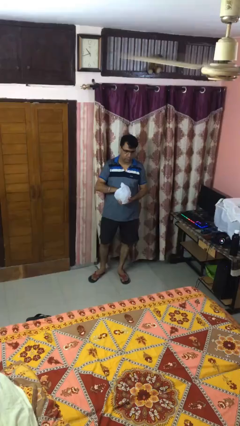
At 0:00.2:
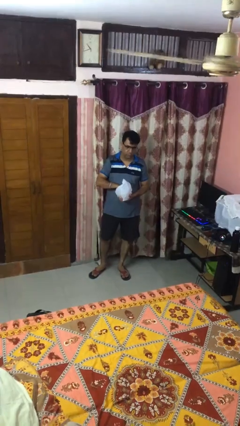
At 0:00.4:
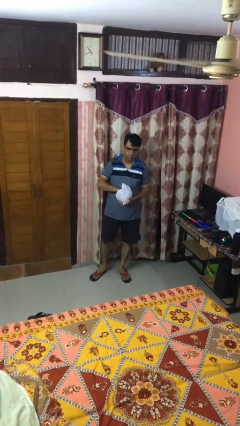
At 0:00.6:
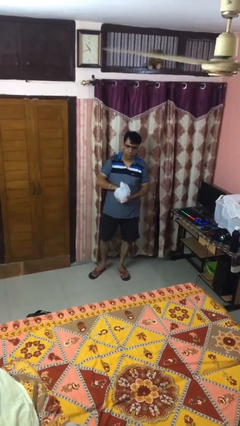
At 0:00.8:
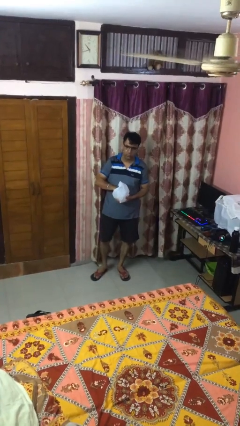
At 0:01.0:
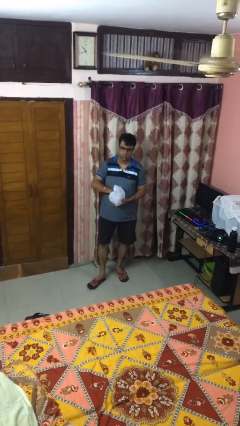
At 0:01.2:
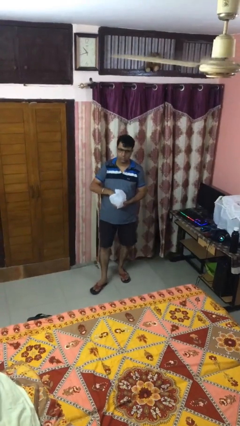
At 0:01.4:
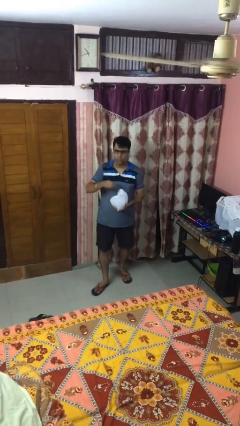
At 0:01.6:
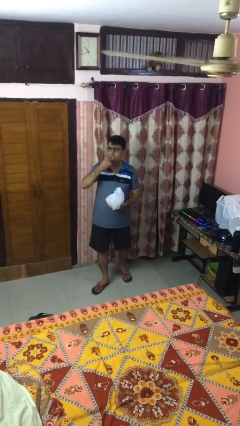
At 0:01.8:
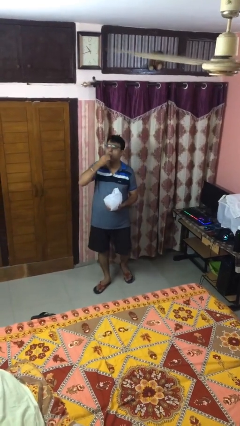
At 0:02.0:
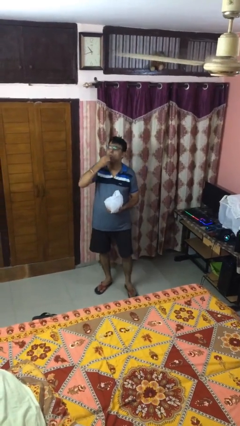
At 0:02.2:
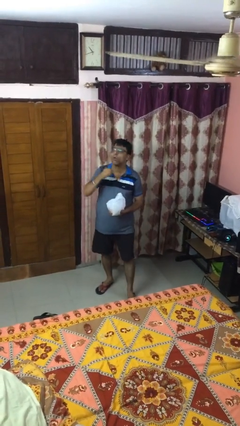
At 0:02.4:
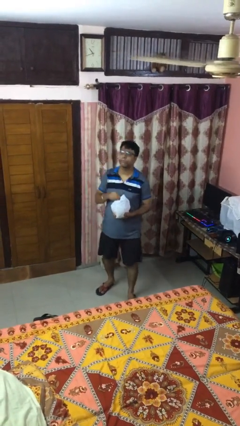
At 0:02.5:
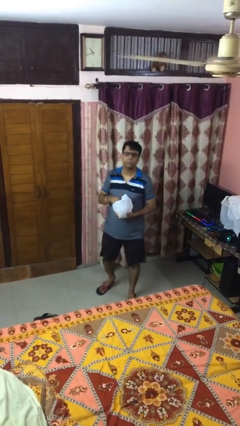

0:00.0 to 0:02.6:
person eats snack from bag

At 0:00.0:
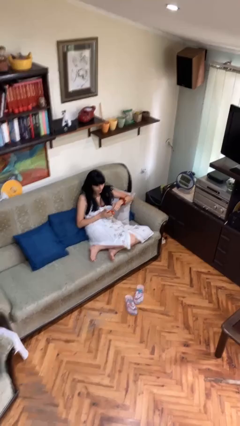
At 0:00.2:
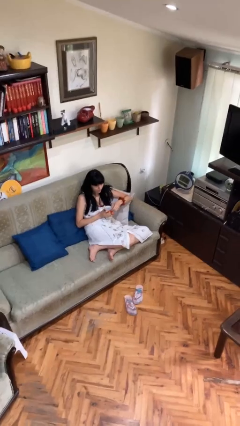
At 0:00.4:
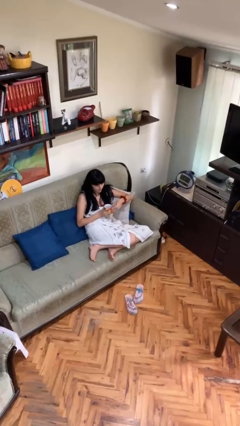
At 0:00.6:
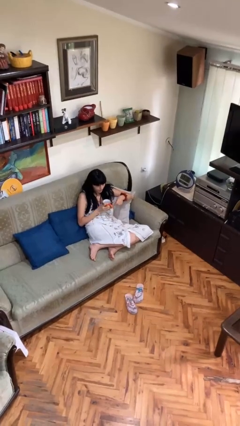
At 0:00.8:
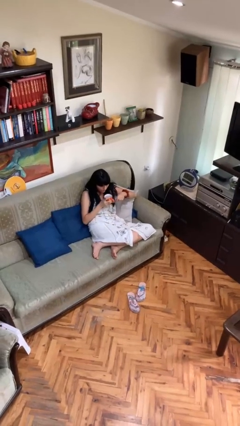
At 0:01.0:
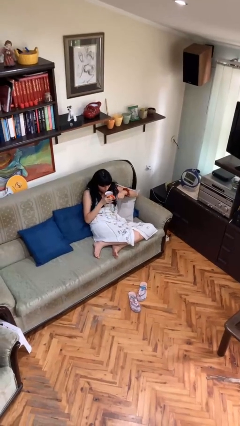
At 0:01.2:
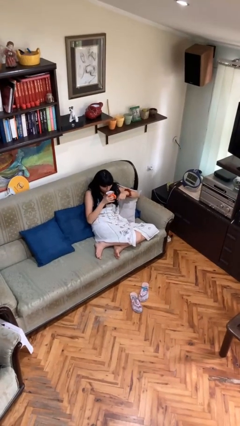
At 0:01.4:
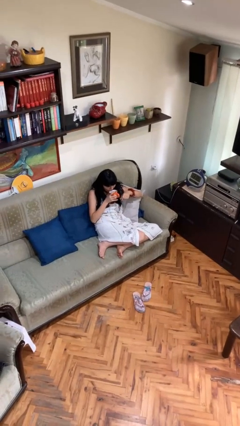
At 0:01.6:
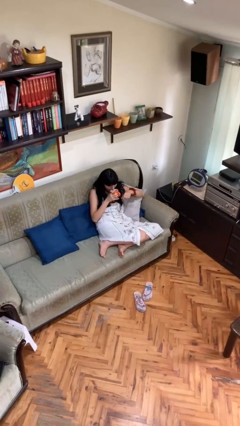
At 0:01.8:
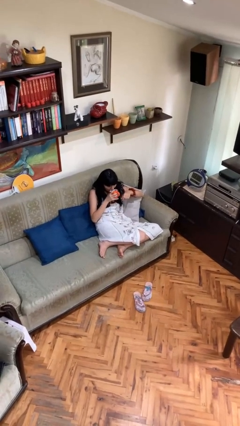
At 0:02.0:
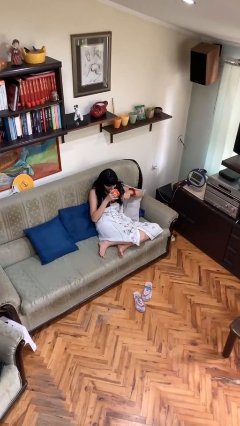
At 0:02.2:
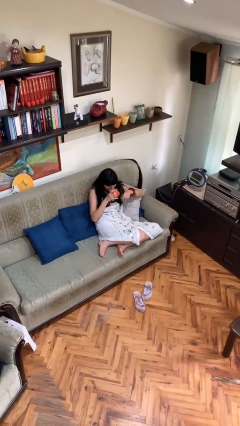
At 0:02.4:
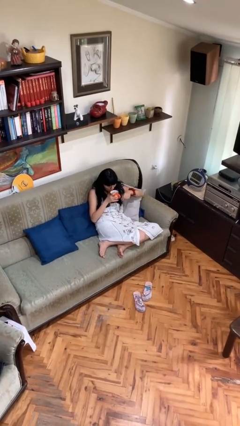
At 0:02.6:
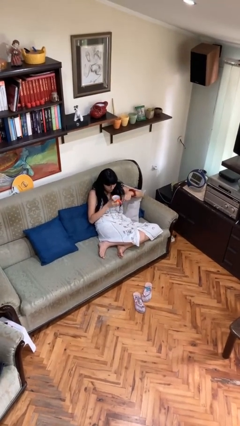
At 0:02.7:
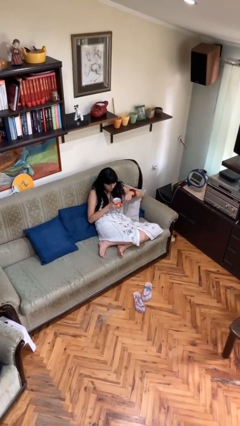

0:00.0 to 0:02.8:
person drinks from mug

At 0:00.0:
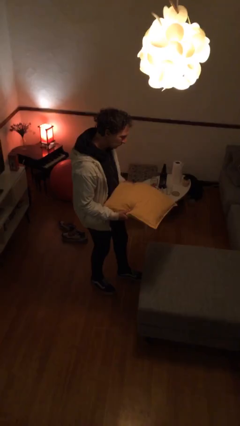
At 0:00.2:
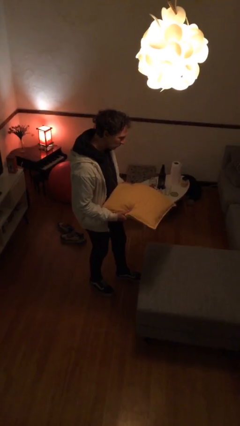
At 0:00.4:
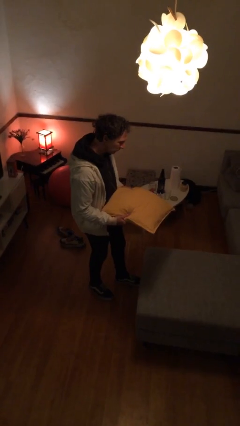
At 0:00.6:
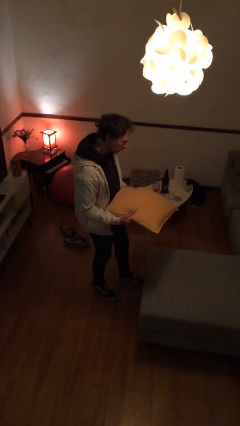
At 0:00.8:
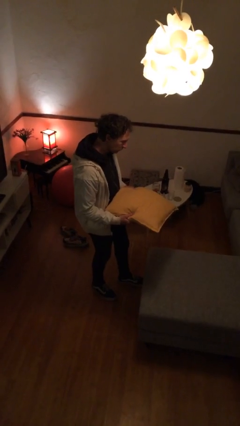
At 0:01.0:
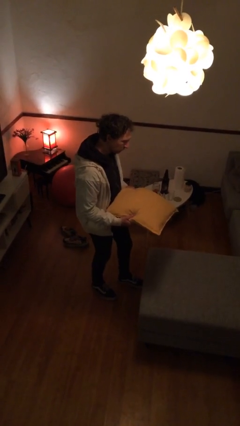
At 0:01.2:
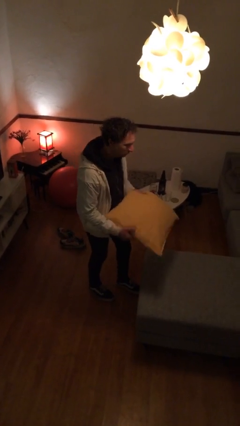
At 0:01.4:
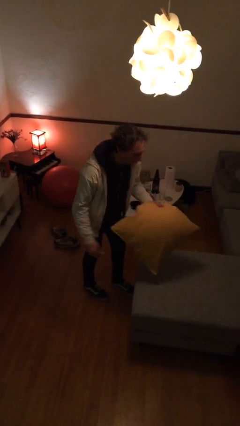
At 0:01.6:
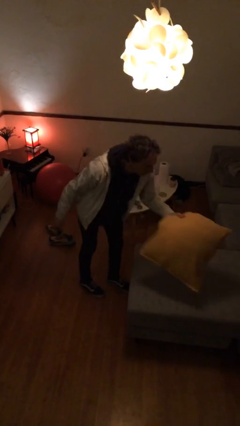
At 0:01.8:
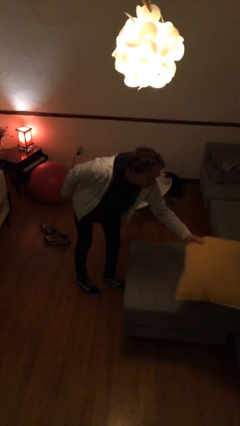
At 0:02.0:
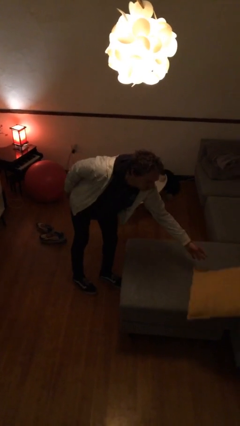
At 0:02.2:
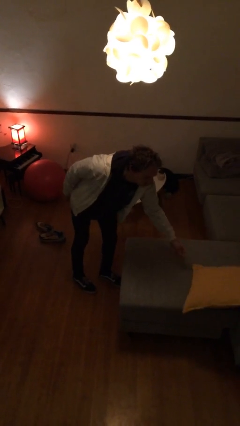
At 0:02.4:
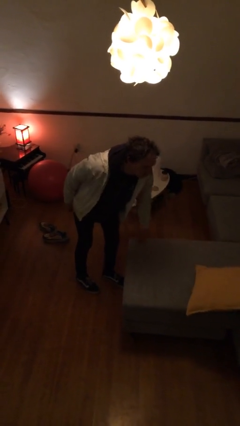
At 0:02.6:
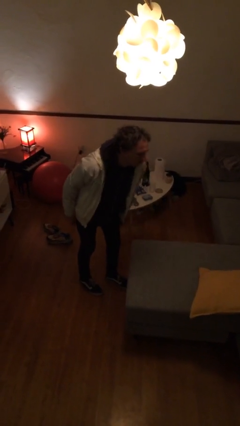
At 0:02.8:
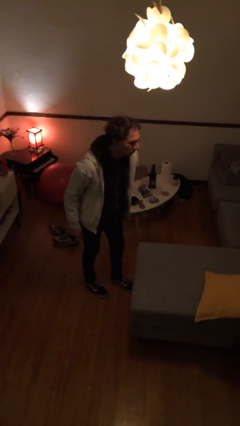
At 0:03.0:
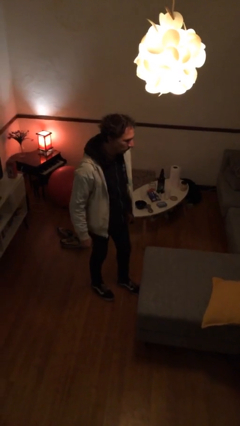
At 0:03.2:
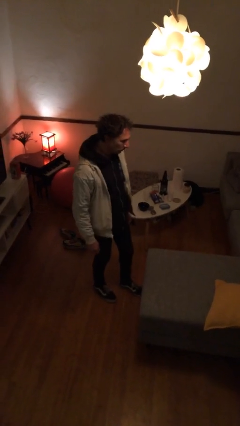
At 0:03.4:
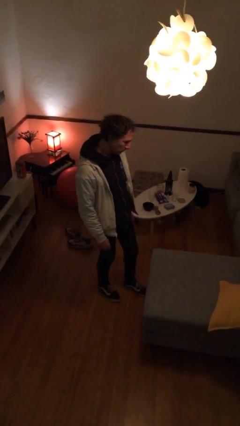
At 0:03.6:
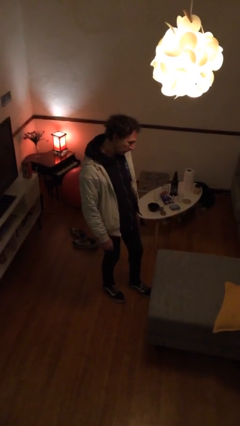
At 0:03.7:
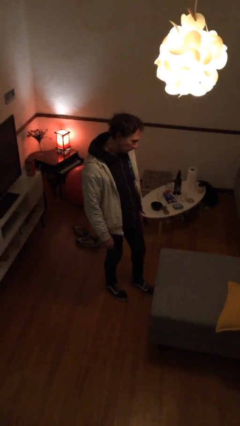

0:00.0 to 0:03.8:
person puts down object on couch

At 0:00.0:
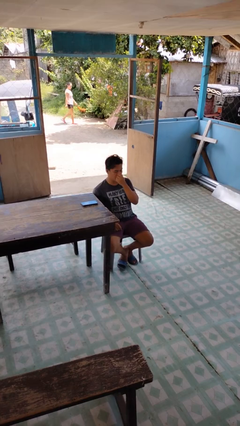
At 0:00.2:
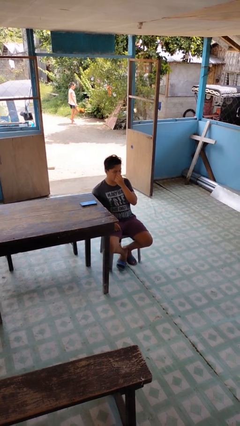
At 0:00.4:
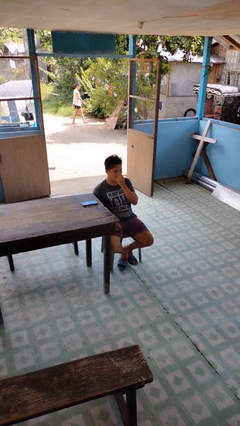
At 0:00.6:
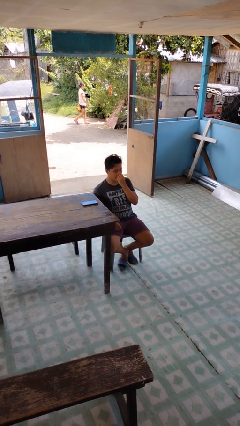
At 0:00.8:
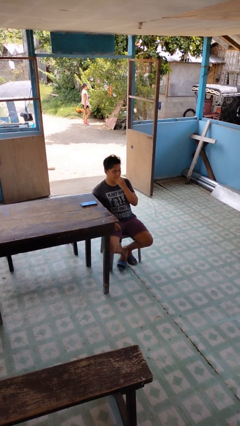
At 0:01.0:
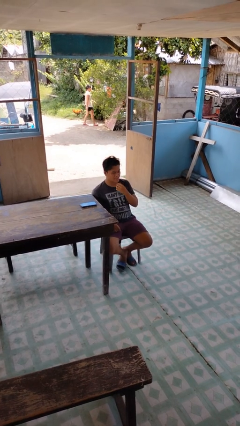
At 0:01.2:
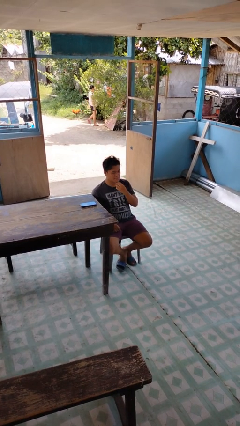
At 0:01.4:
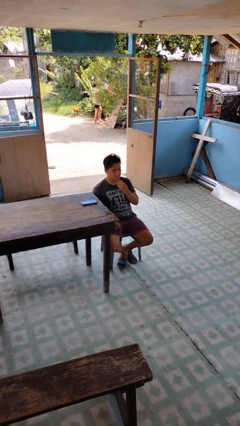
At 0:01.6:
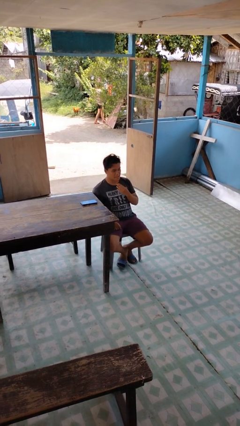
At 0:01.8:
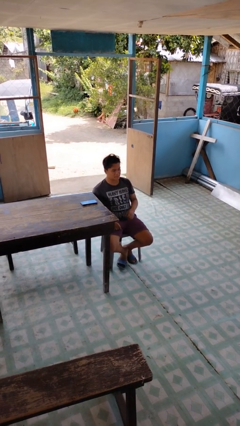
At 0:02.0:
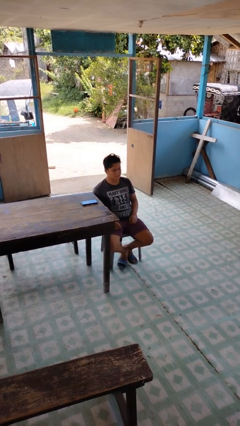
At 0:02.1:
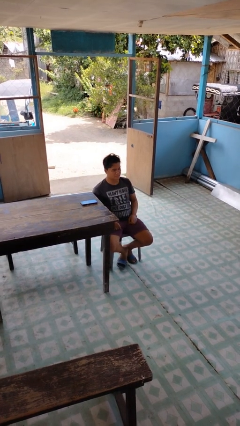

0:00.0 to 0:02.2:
person scratches face

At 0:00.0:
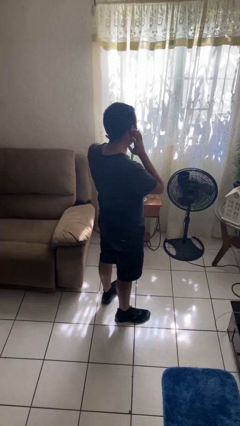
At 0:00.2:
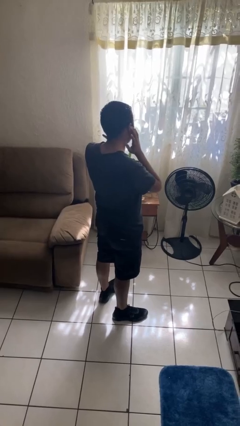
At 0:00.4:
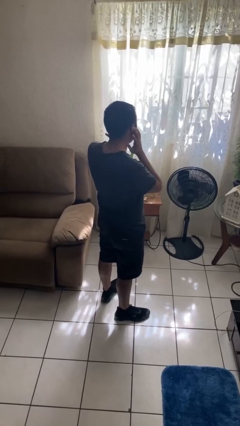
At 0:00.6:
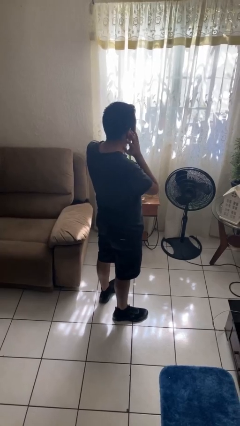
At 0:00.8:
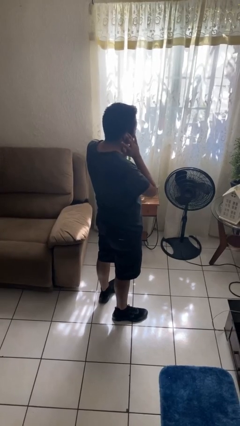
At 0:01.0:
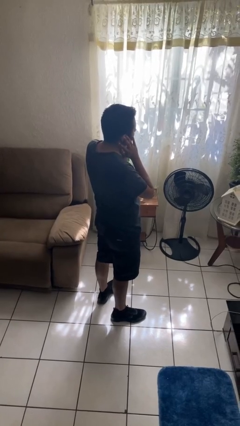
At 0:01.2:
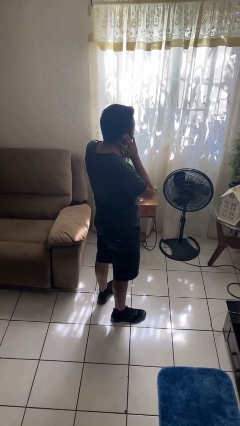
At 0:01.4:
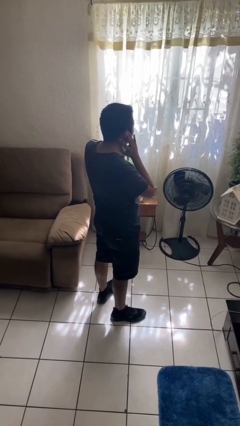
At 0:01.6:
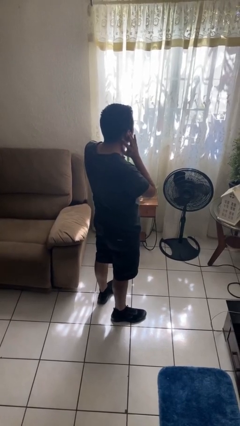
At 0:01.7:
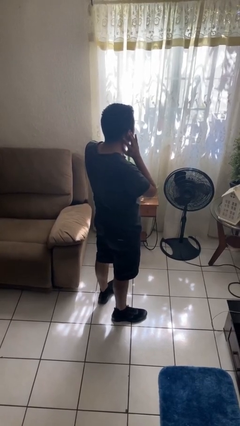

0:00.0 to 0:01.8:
person puts fingers in ear

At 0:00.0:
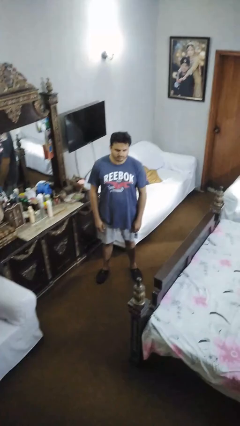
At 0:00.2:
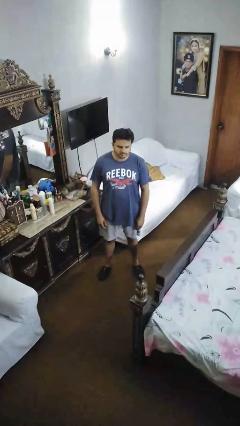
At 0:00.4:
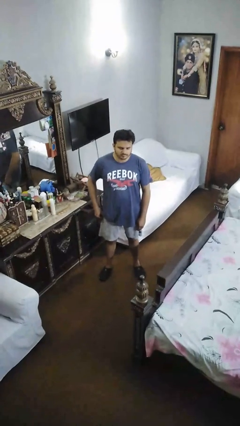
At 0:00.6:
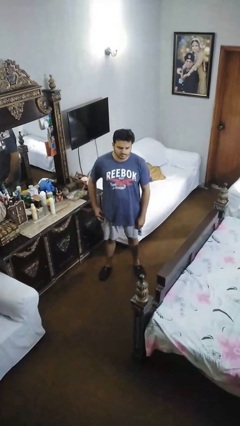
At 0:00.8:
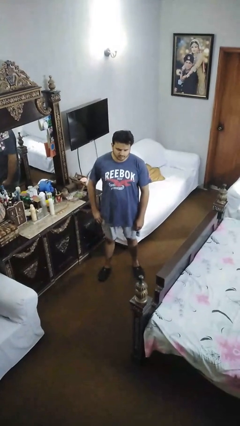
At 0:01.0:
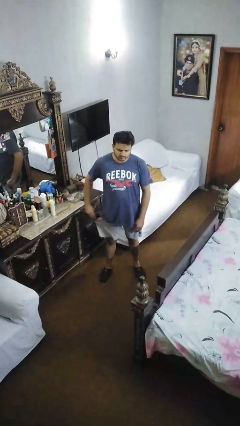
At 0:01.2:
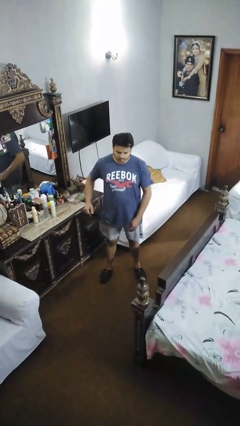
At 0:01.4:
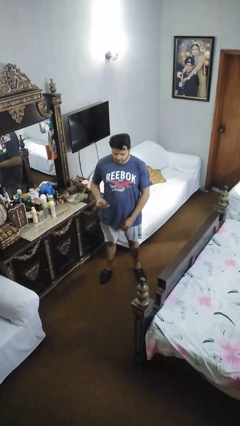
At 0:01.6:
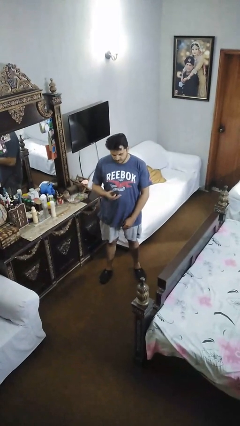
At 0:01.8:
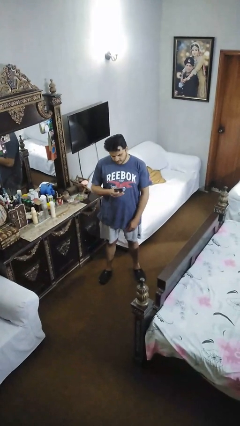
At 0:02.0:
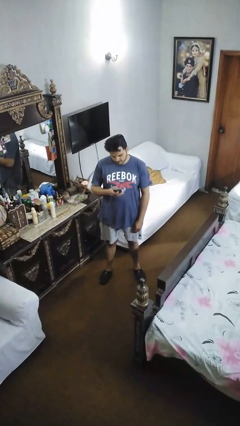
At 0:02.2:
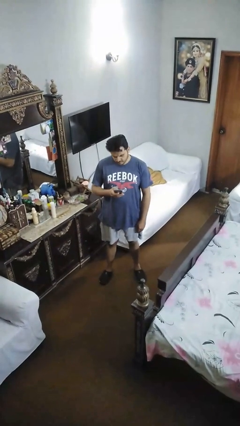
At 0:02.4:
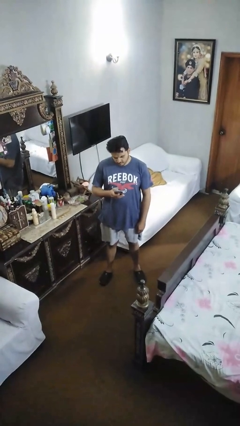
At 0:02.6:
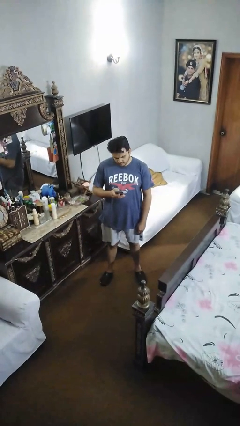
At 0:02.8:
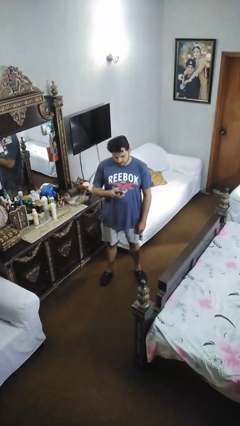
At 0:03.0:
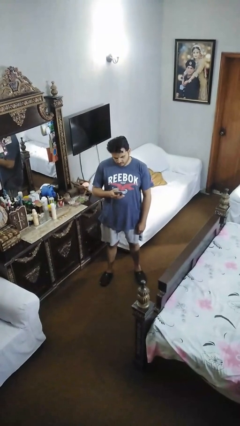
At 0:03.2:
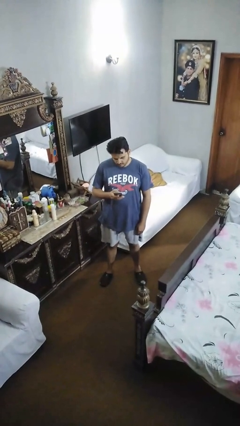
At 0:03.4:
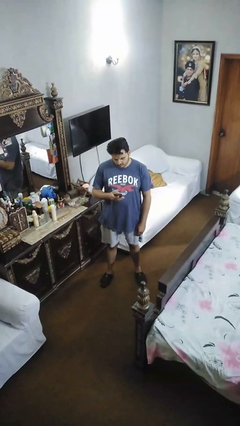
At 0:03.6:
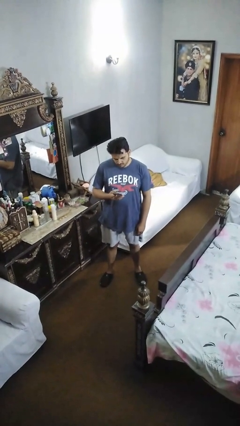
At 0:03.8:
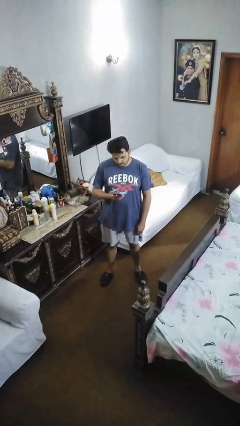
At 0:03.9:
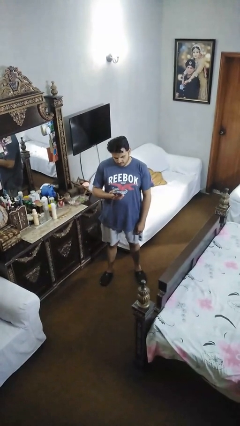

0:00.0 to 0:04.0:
person takes phone from pocket

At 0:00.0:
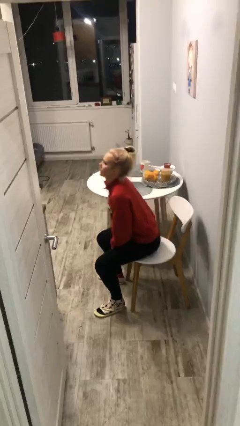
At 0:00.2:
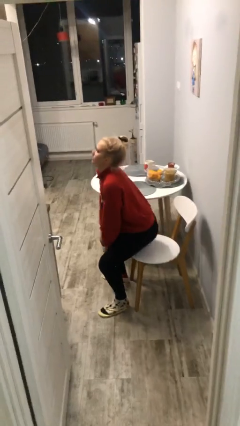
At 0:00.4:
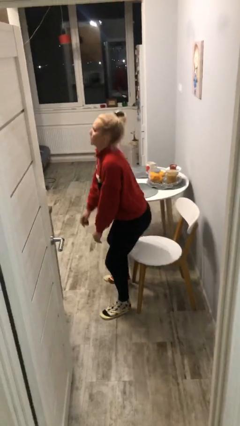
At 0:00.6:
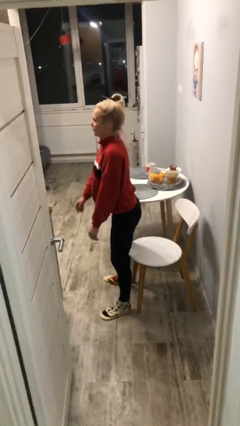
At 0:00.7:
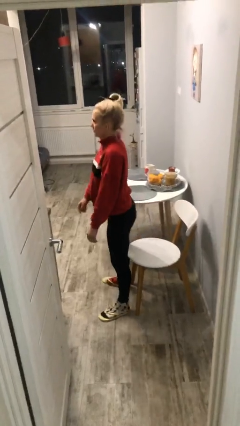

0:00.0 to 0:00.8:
person stands up
